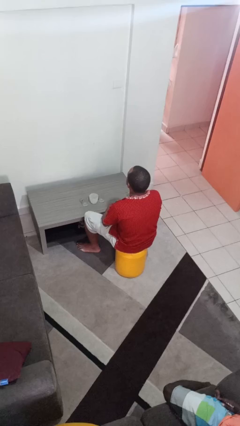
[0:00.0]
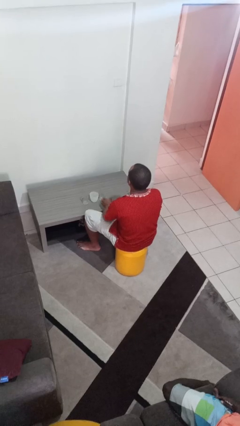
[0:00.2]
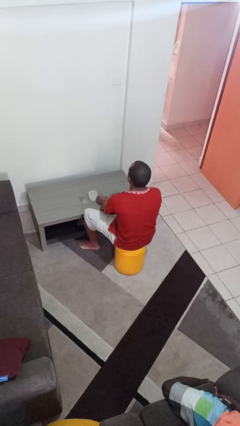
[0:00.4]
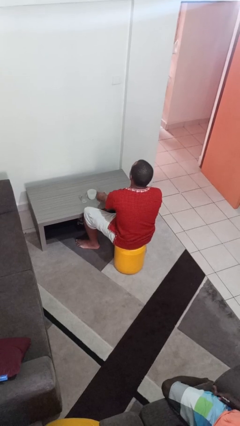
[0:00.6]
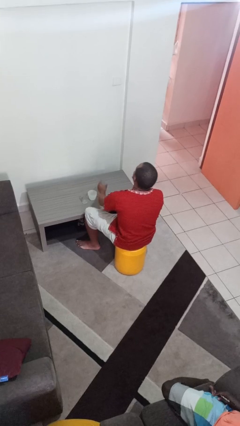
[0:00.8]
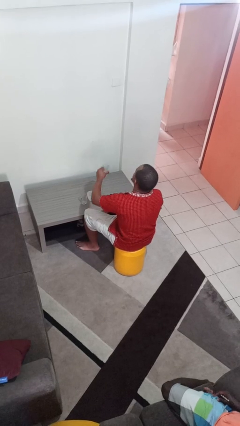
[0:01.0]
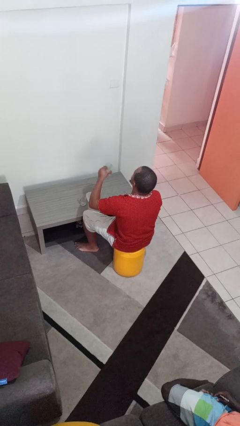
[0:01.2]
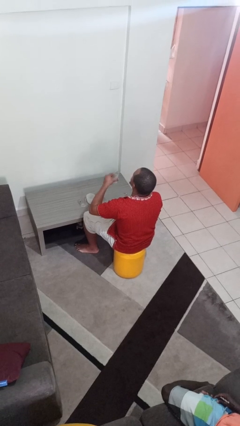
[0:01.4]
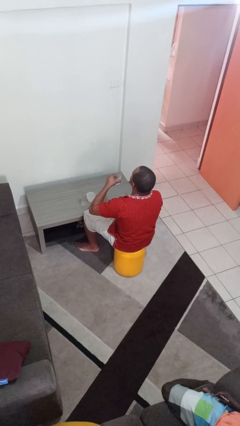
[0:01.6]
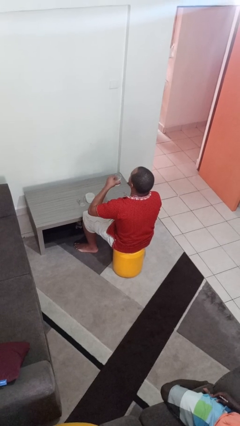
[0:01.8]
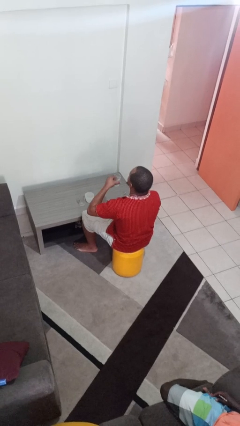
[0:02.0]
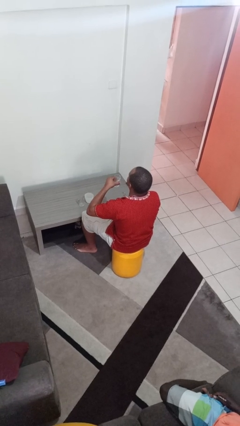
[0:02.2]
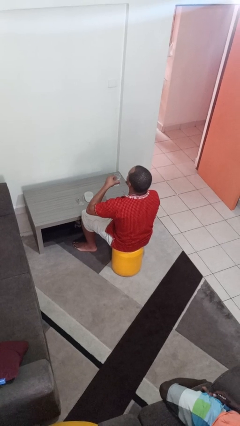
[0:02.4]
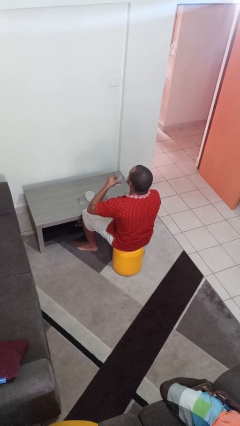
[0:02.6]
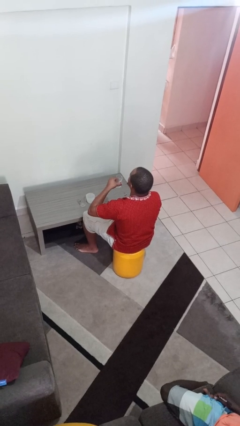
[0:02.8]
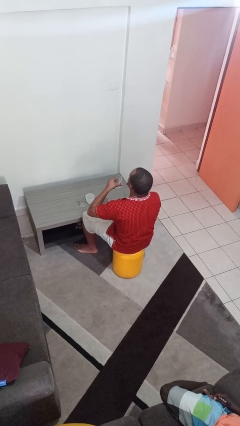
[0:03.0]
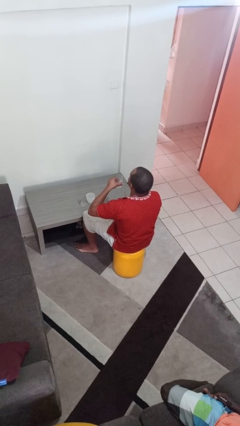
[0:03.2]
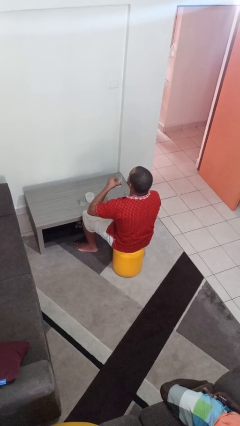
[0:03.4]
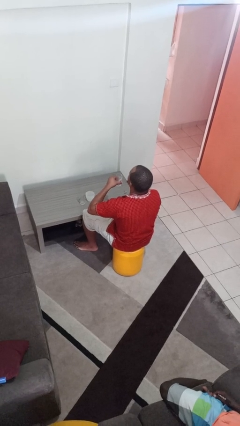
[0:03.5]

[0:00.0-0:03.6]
person picks up object from table

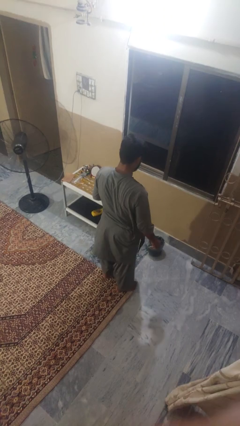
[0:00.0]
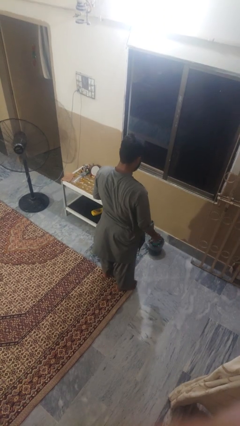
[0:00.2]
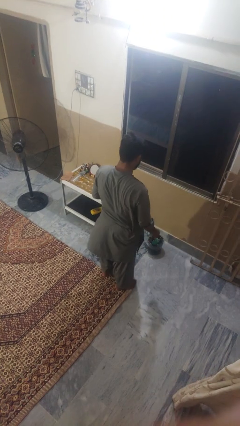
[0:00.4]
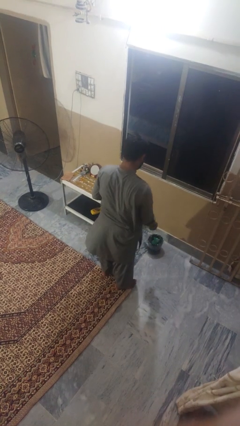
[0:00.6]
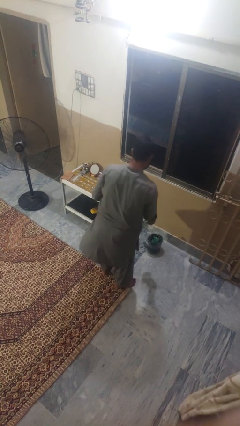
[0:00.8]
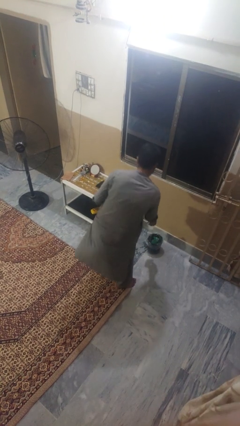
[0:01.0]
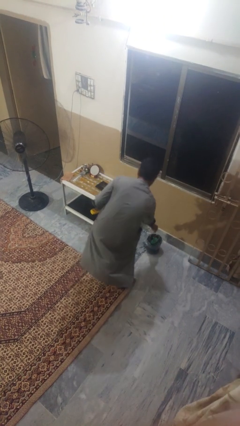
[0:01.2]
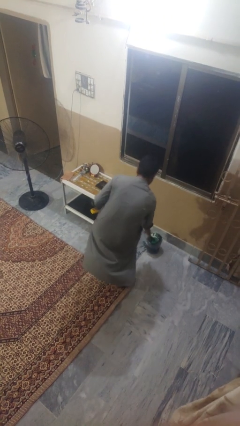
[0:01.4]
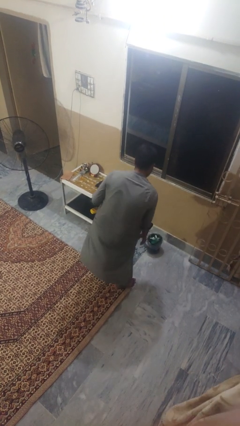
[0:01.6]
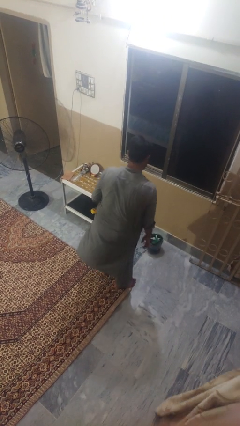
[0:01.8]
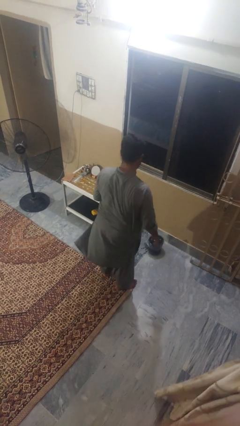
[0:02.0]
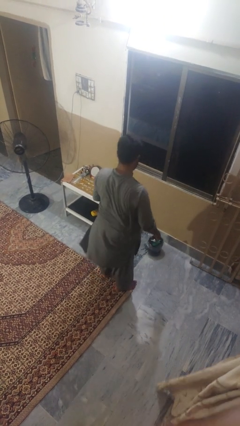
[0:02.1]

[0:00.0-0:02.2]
person discards trash

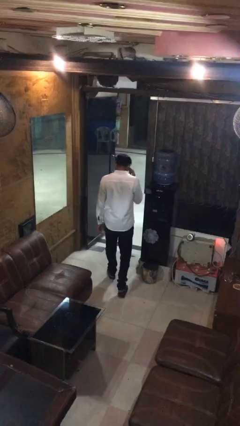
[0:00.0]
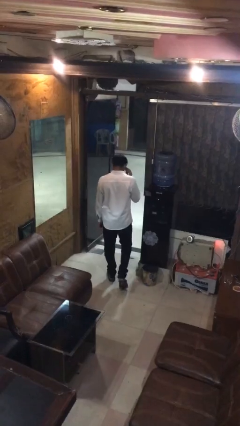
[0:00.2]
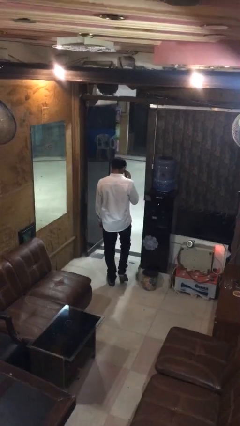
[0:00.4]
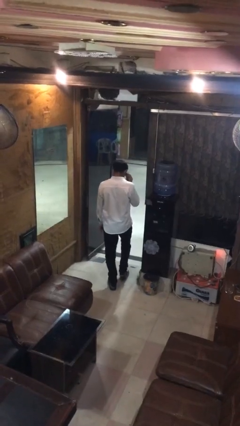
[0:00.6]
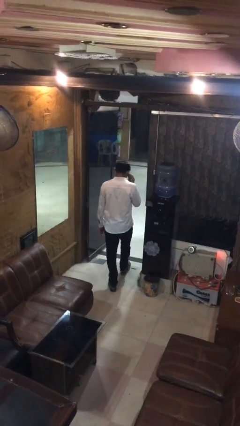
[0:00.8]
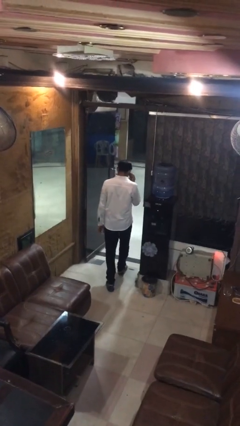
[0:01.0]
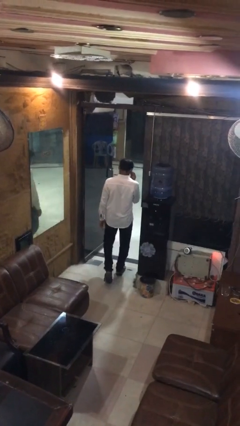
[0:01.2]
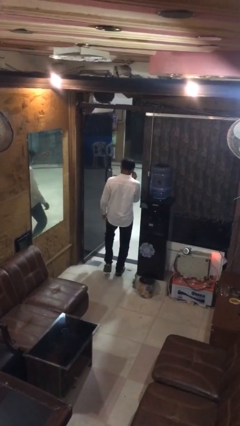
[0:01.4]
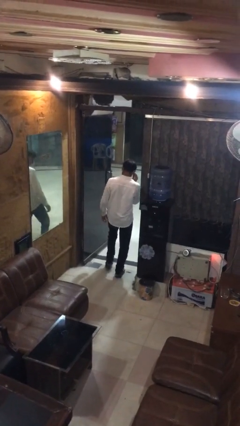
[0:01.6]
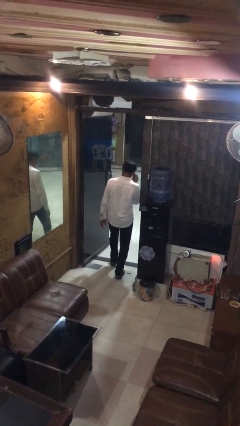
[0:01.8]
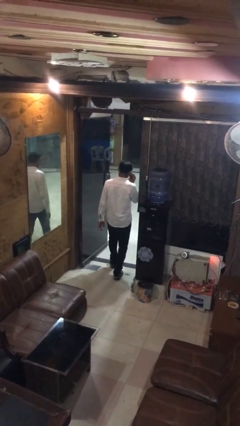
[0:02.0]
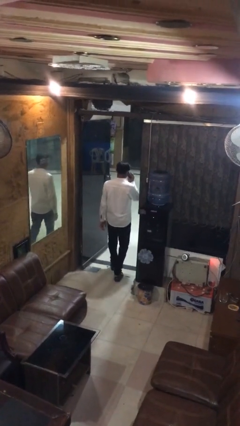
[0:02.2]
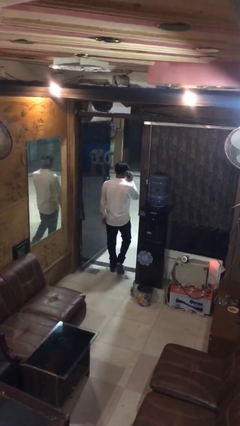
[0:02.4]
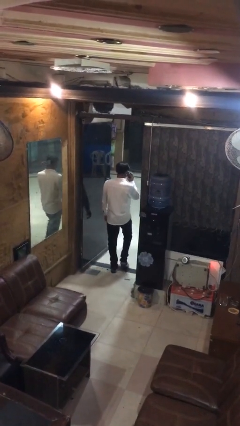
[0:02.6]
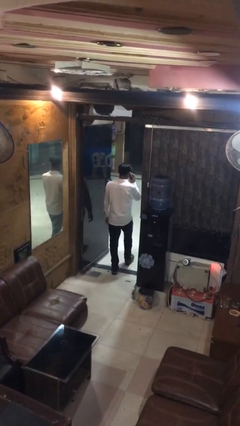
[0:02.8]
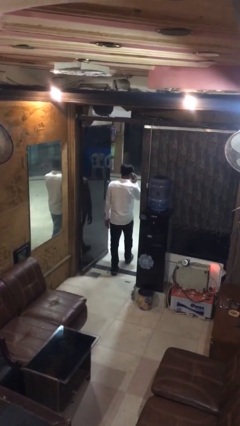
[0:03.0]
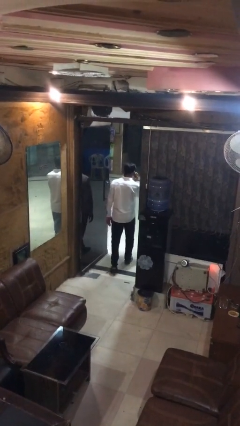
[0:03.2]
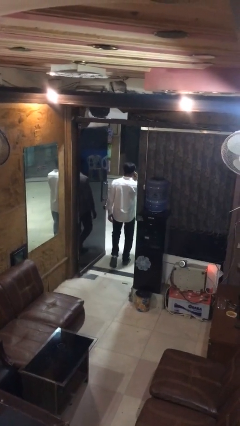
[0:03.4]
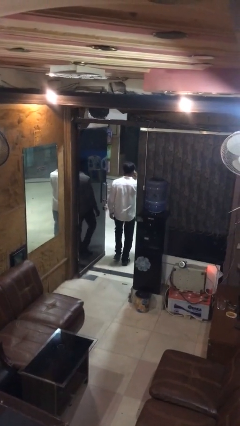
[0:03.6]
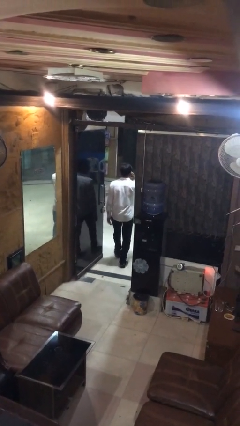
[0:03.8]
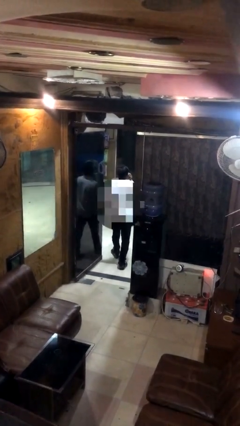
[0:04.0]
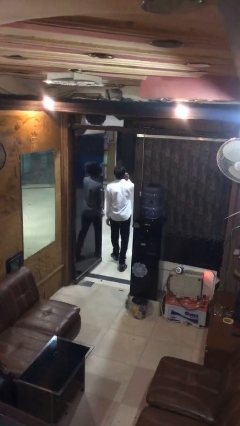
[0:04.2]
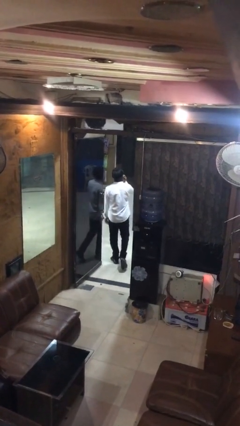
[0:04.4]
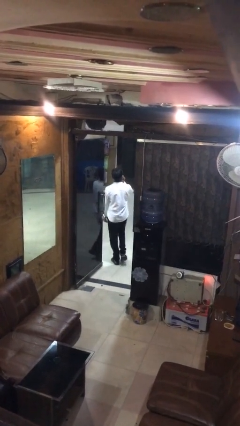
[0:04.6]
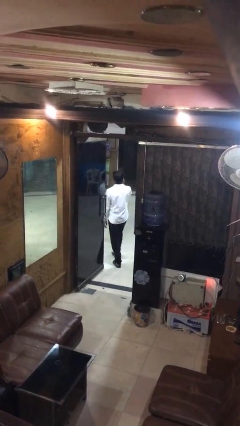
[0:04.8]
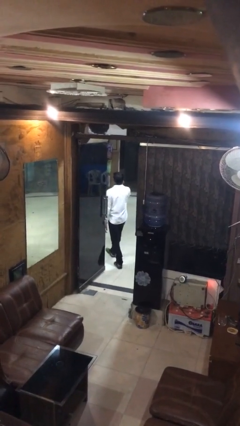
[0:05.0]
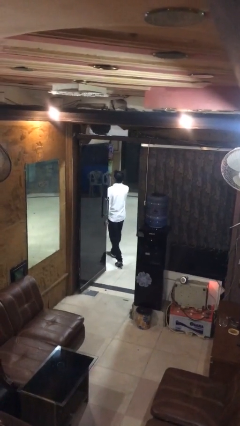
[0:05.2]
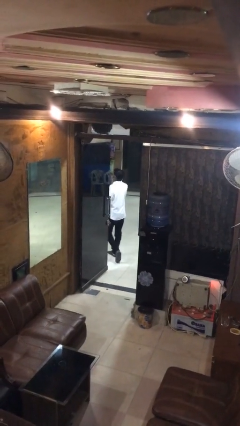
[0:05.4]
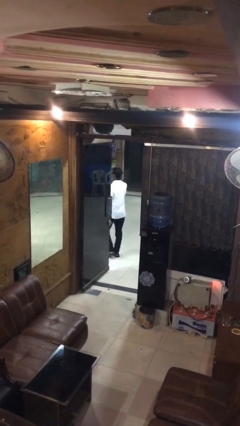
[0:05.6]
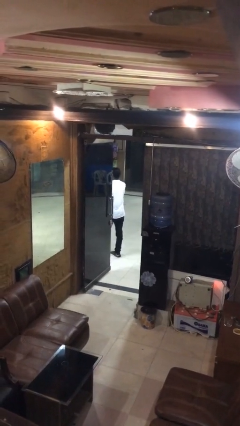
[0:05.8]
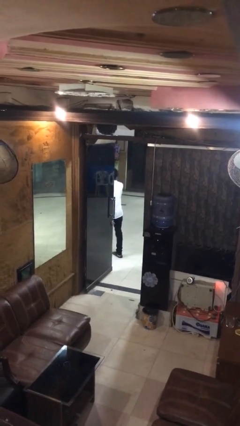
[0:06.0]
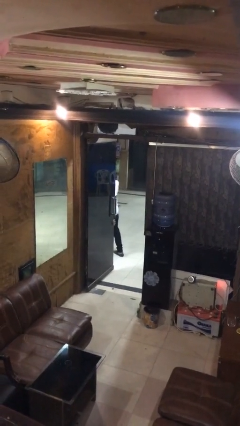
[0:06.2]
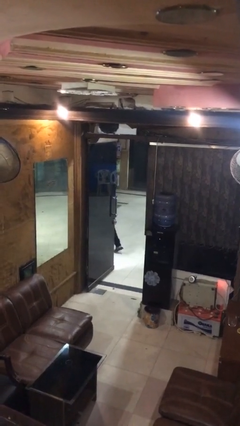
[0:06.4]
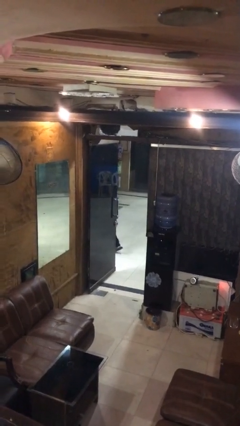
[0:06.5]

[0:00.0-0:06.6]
person exits scene through structure

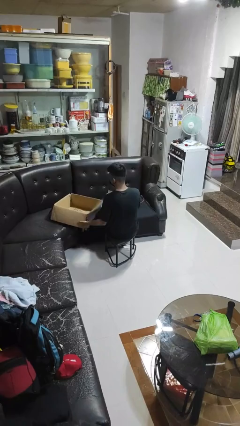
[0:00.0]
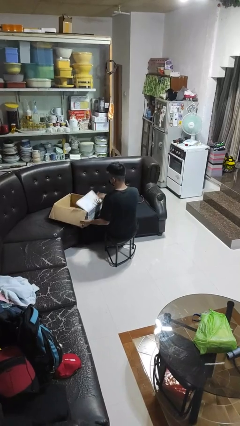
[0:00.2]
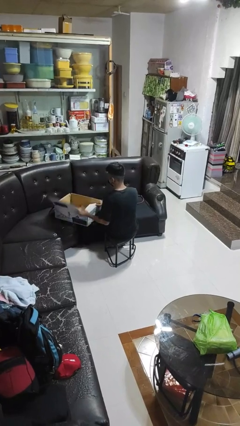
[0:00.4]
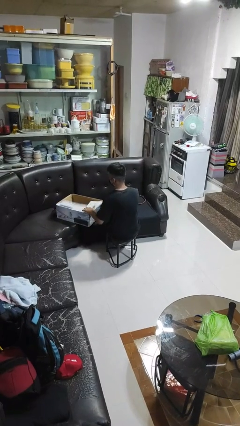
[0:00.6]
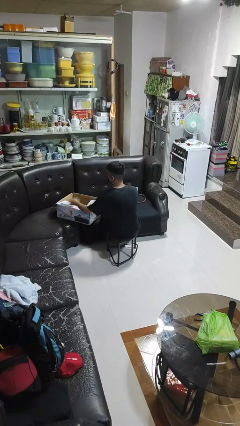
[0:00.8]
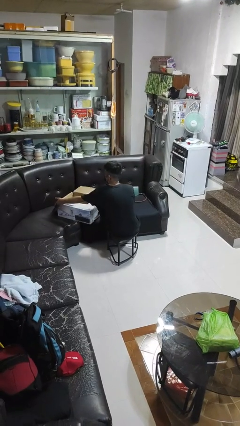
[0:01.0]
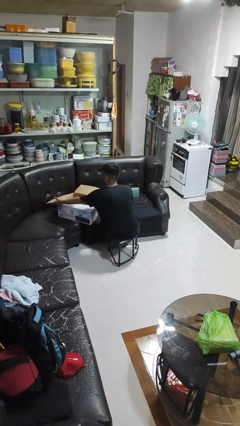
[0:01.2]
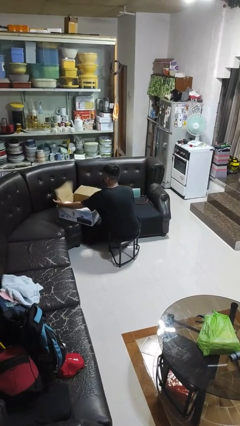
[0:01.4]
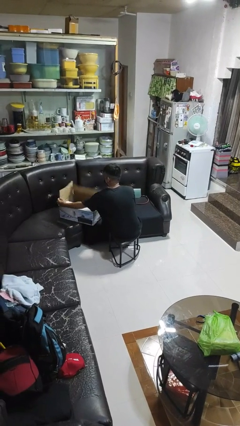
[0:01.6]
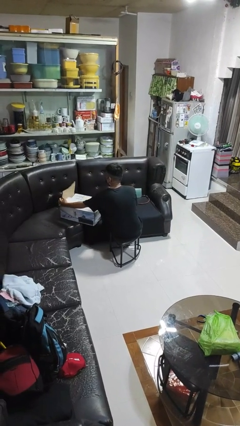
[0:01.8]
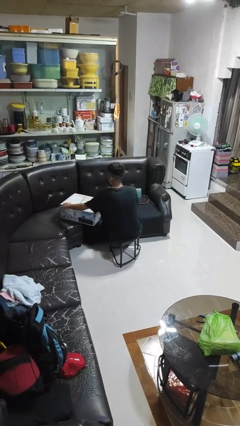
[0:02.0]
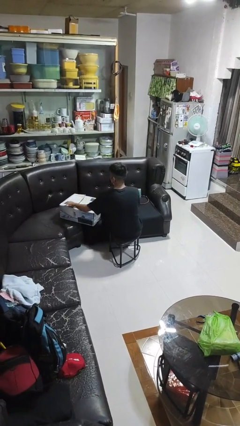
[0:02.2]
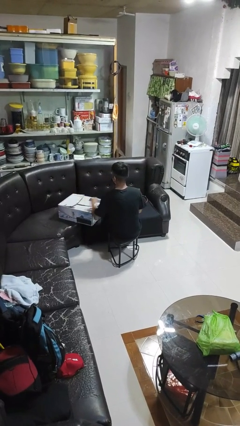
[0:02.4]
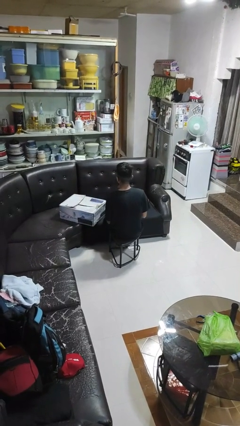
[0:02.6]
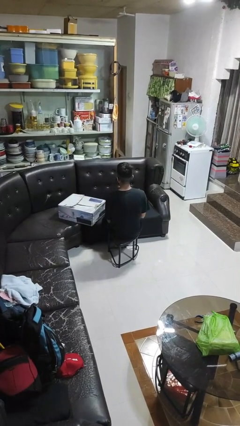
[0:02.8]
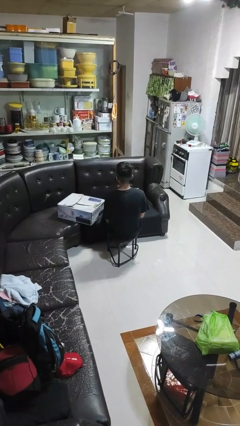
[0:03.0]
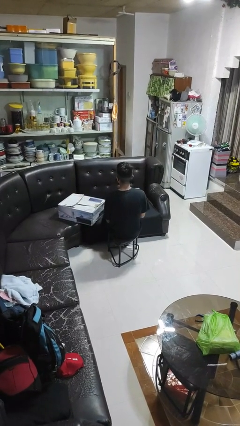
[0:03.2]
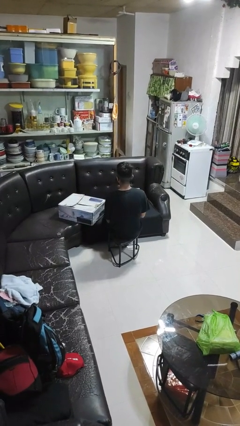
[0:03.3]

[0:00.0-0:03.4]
person closes box

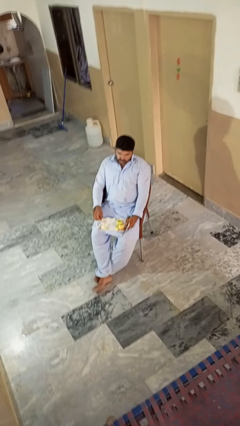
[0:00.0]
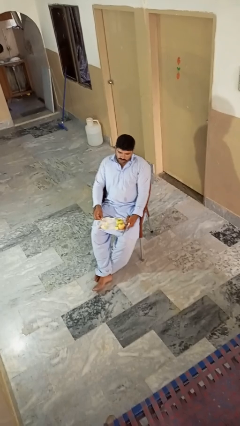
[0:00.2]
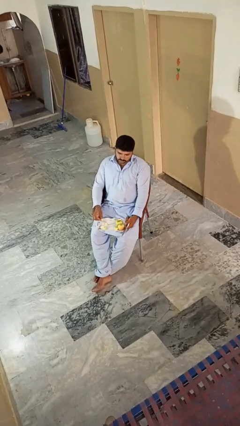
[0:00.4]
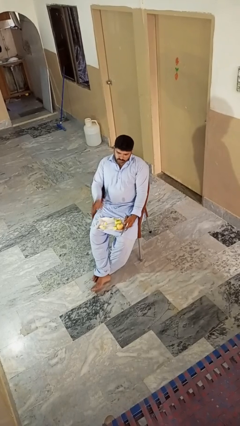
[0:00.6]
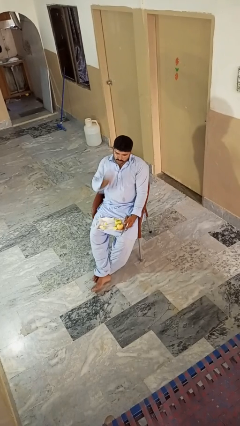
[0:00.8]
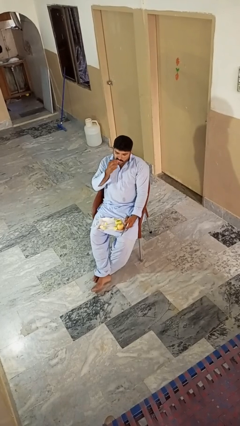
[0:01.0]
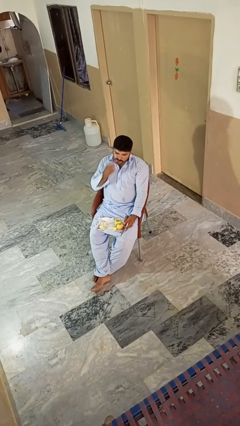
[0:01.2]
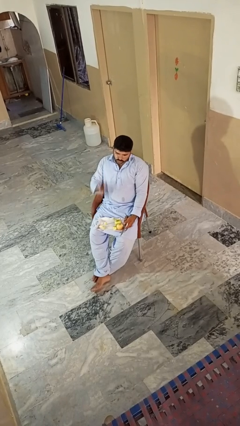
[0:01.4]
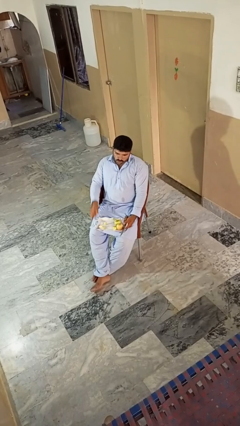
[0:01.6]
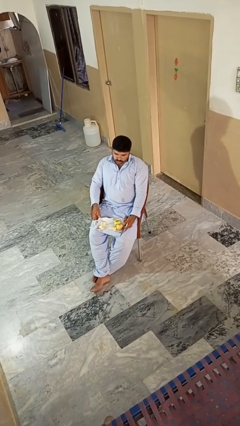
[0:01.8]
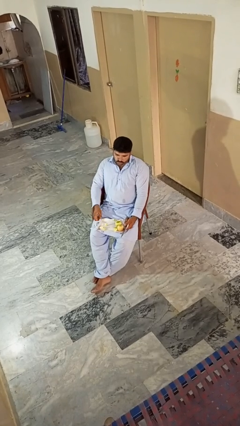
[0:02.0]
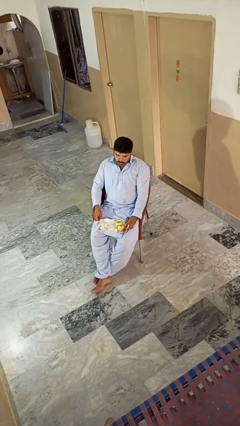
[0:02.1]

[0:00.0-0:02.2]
person eats apple
